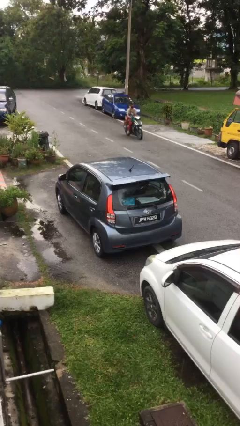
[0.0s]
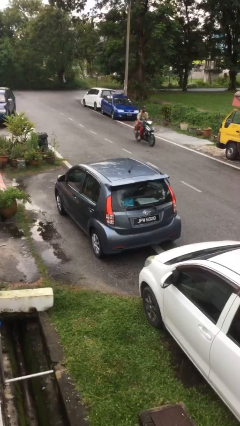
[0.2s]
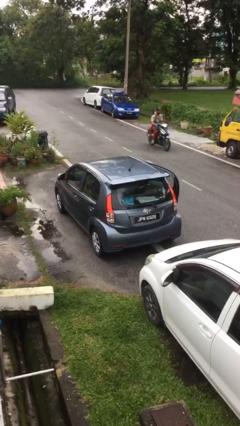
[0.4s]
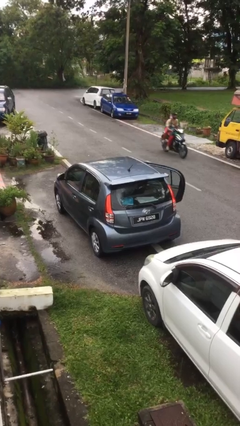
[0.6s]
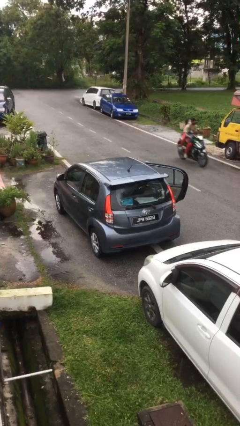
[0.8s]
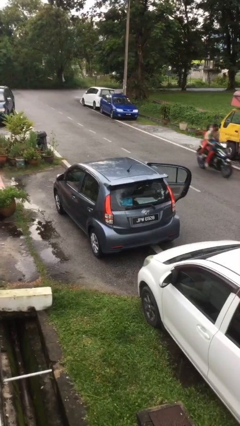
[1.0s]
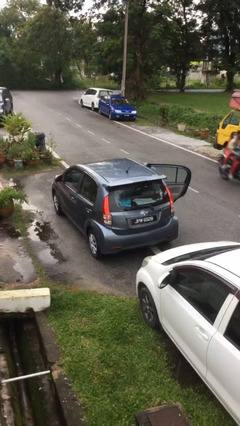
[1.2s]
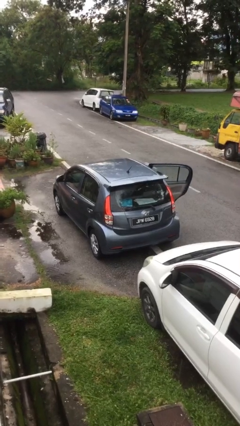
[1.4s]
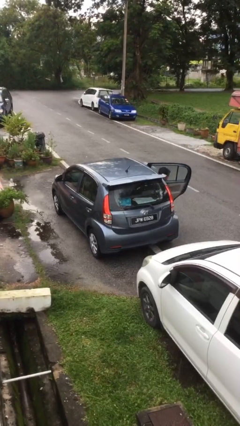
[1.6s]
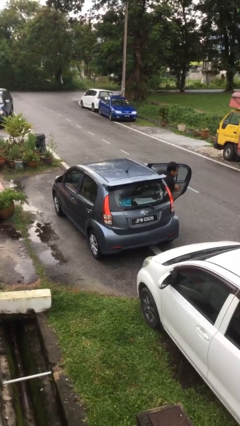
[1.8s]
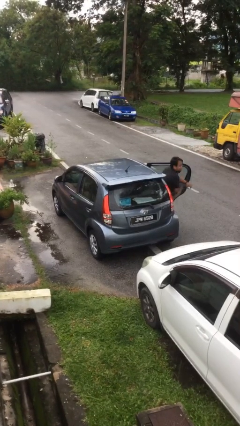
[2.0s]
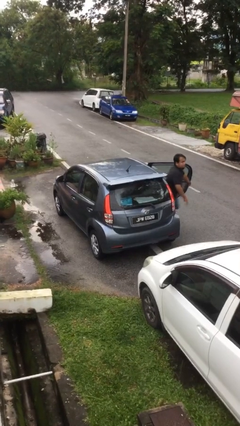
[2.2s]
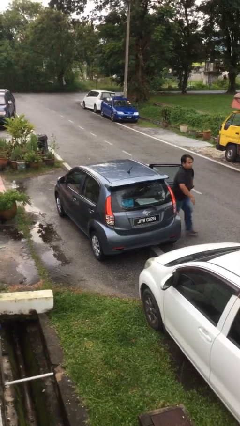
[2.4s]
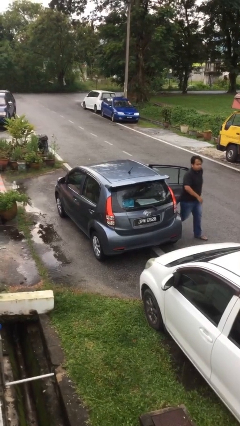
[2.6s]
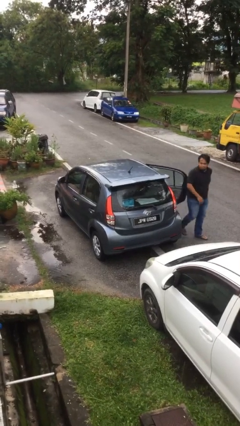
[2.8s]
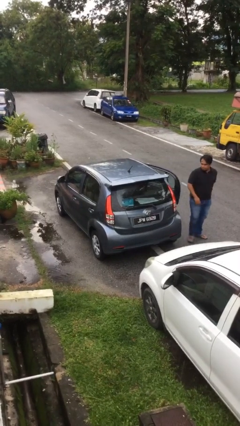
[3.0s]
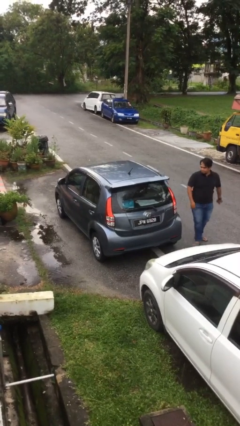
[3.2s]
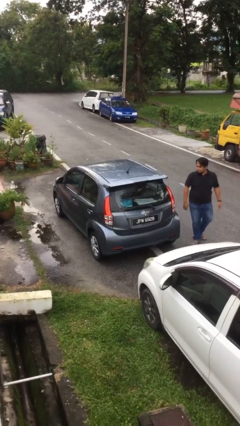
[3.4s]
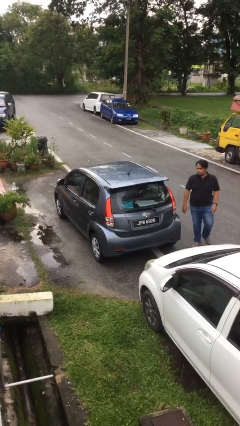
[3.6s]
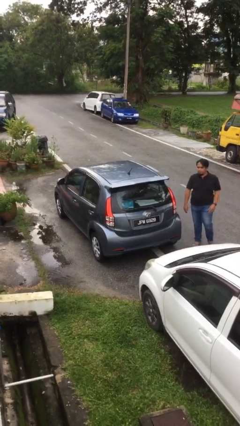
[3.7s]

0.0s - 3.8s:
car drops off person

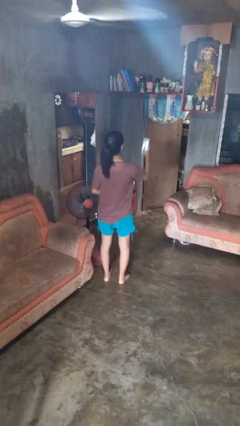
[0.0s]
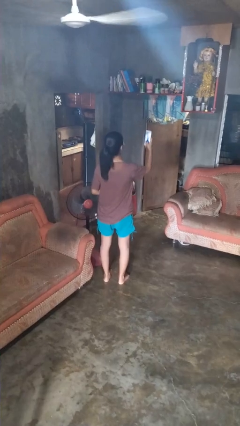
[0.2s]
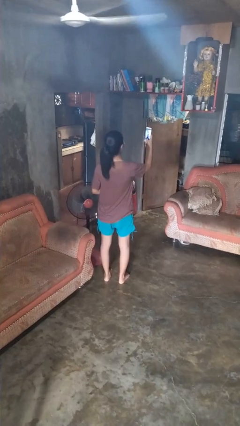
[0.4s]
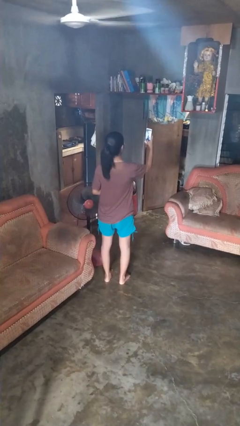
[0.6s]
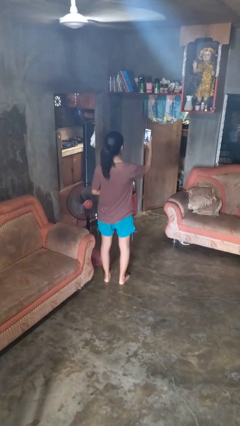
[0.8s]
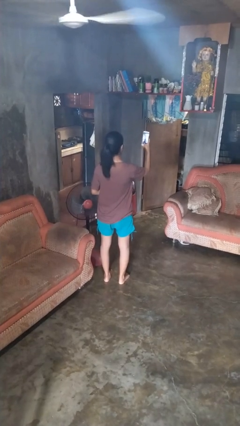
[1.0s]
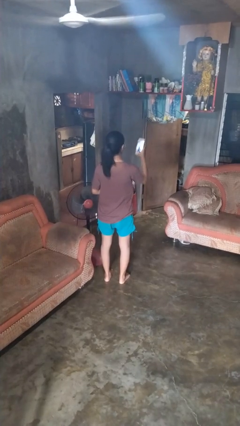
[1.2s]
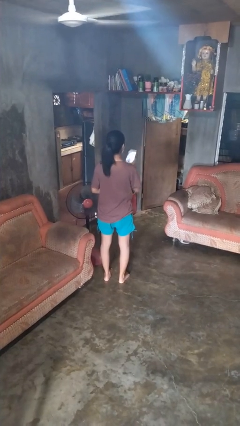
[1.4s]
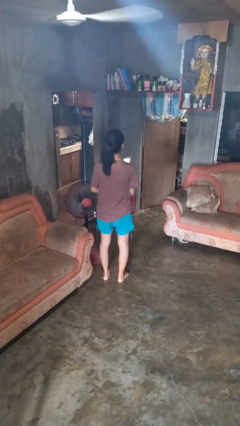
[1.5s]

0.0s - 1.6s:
person takes selfie

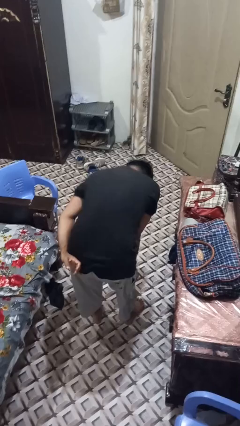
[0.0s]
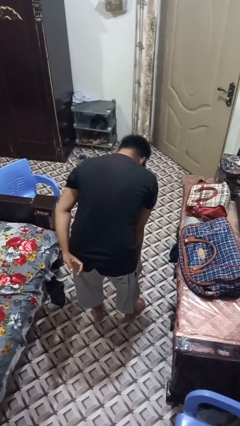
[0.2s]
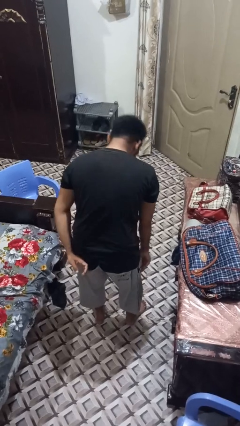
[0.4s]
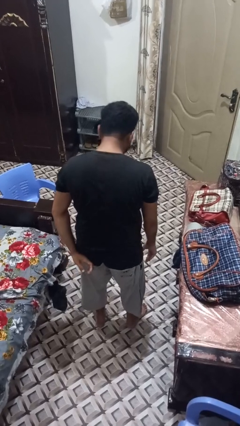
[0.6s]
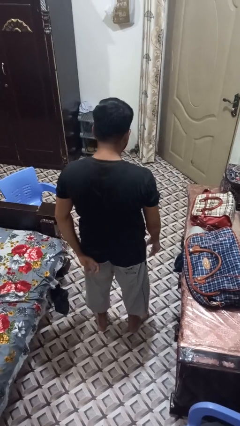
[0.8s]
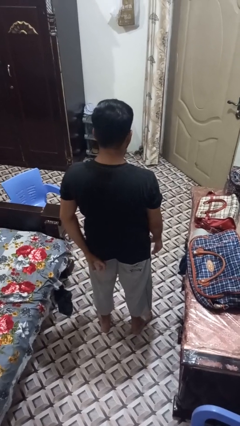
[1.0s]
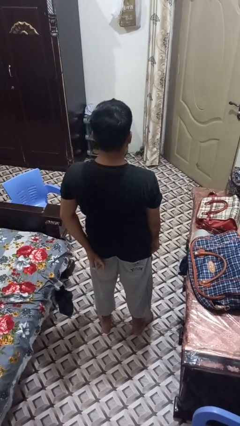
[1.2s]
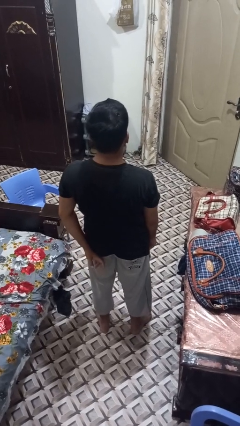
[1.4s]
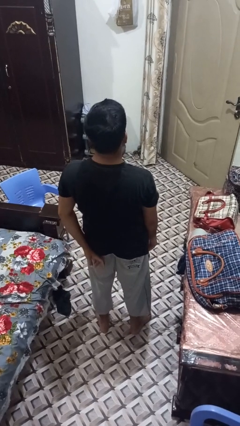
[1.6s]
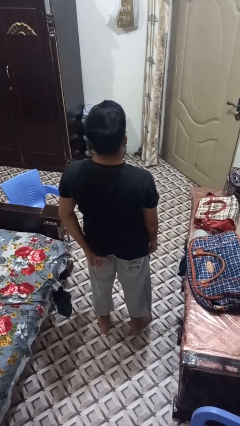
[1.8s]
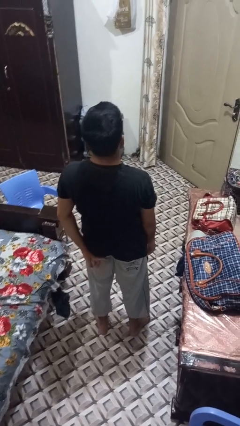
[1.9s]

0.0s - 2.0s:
person stands up from floor

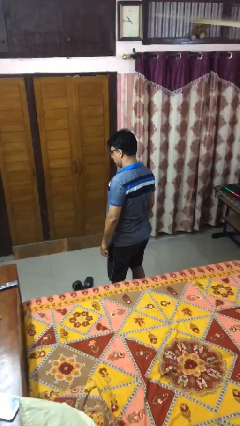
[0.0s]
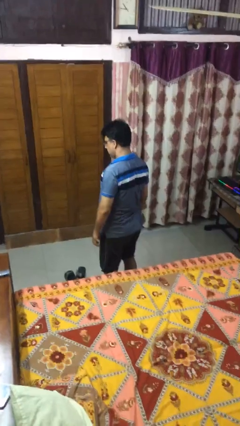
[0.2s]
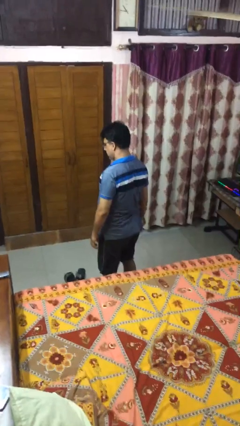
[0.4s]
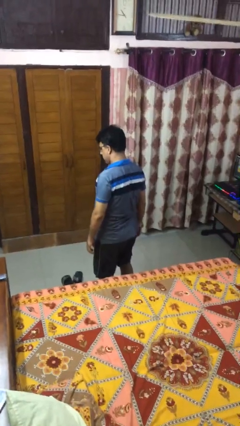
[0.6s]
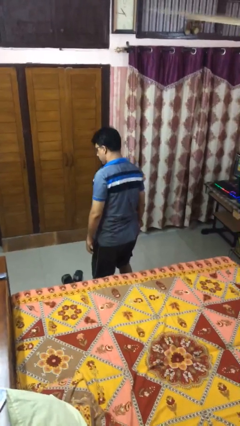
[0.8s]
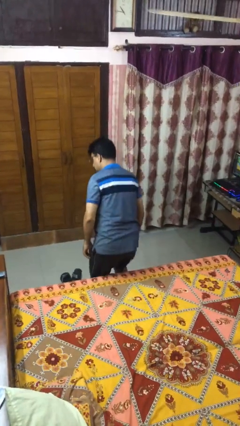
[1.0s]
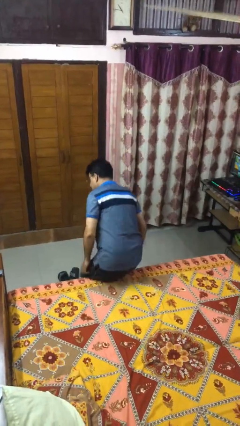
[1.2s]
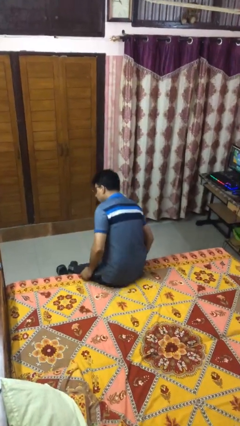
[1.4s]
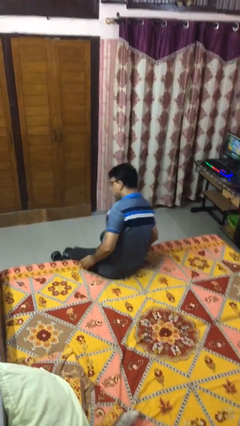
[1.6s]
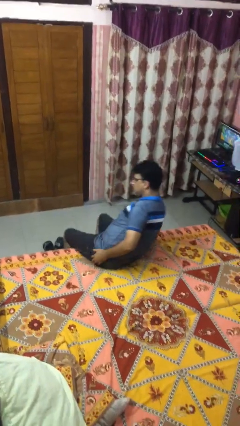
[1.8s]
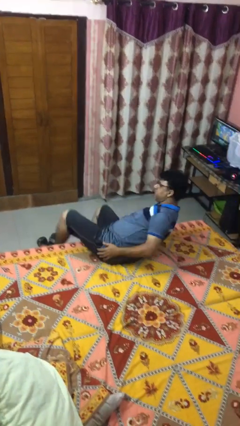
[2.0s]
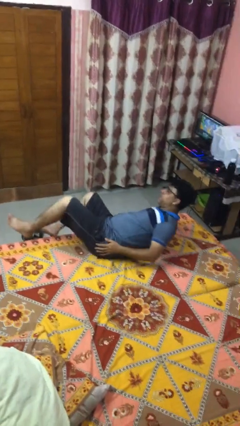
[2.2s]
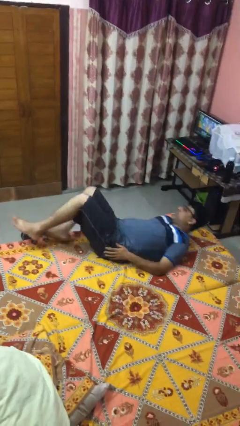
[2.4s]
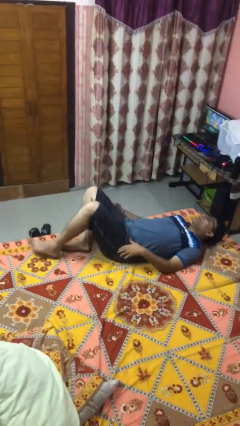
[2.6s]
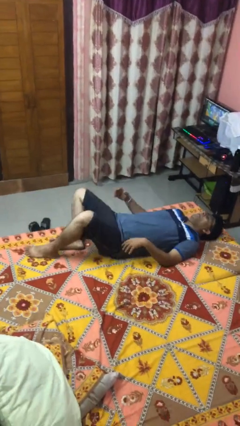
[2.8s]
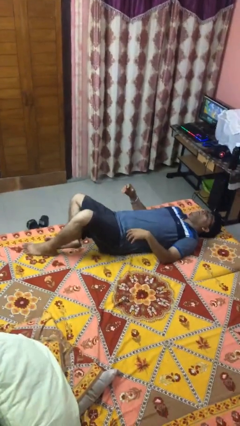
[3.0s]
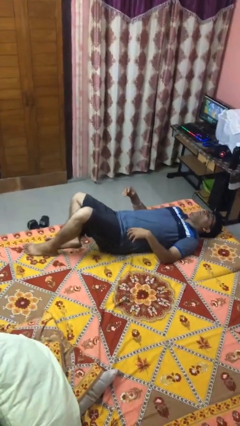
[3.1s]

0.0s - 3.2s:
person lies down on bed

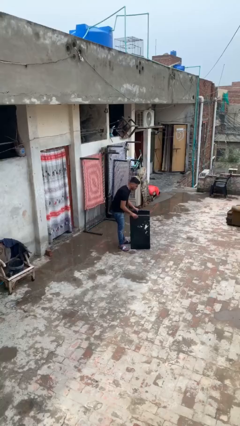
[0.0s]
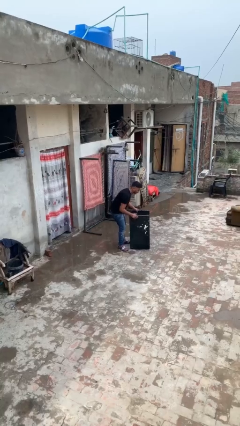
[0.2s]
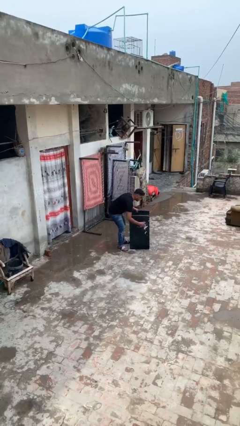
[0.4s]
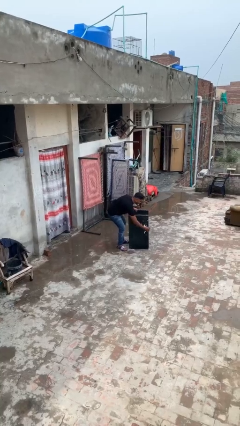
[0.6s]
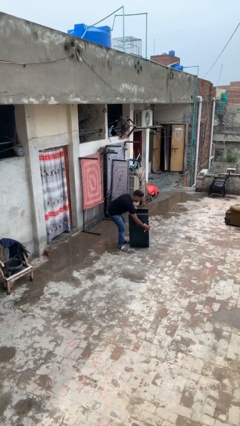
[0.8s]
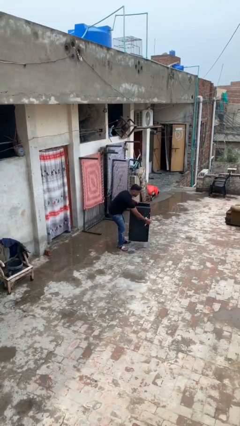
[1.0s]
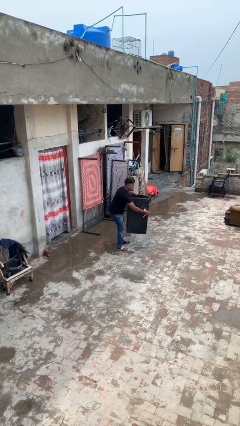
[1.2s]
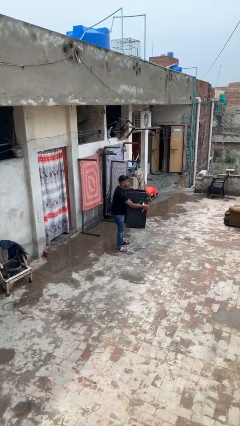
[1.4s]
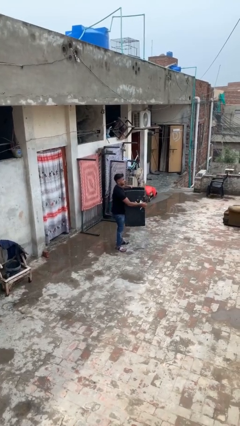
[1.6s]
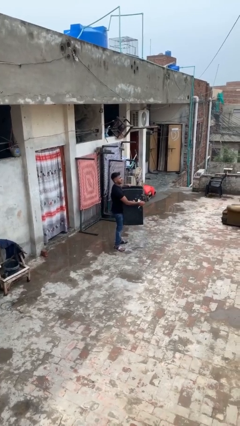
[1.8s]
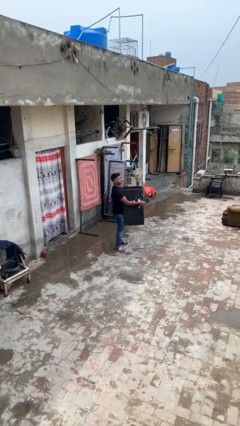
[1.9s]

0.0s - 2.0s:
person picks up object from floor

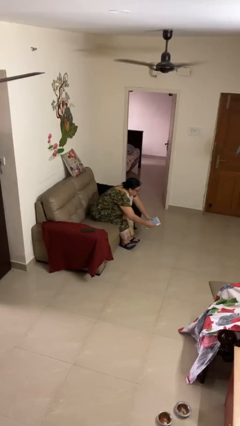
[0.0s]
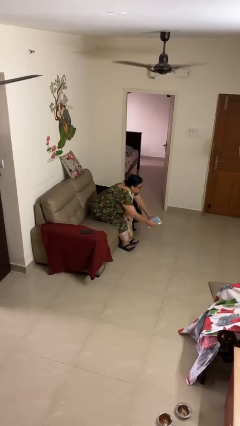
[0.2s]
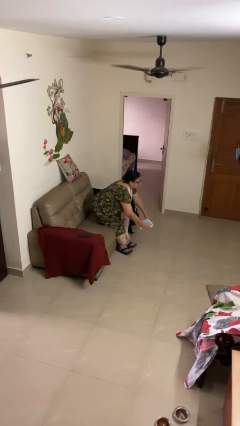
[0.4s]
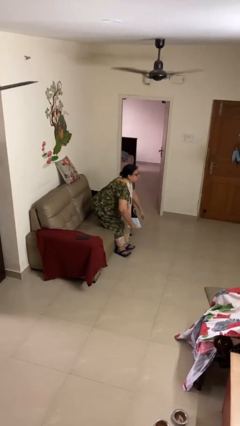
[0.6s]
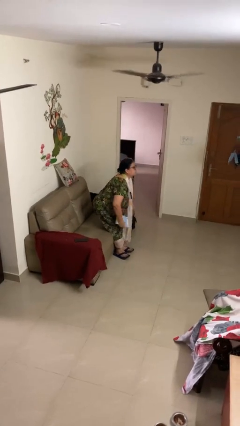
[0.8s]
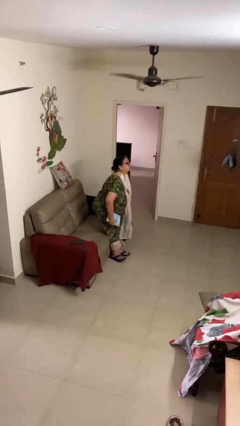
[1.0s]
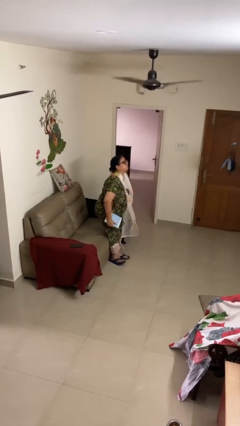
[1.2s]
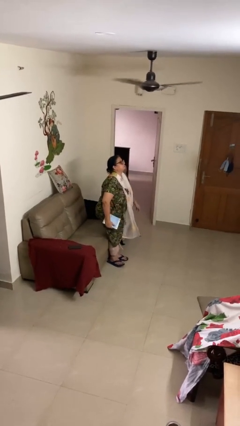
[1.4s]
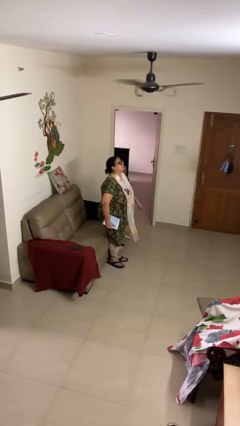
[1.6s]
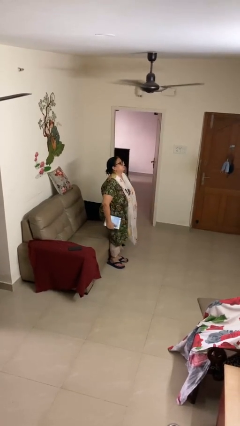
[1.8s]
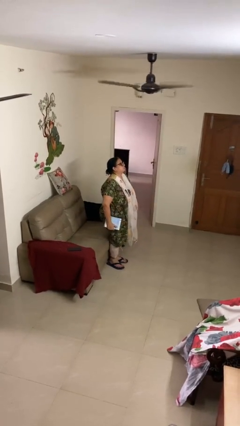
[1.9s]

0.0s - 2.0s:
person stands up

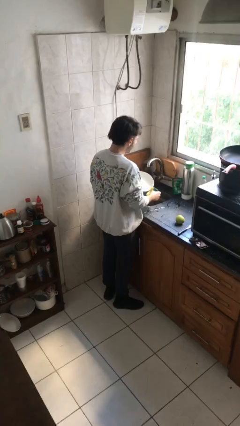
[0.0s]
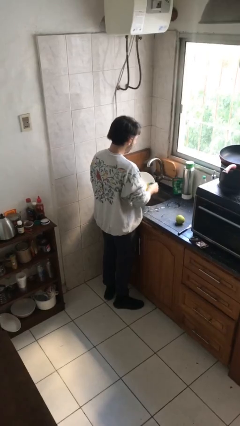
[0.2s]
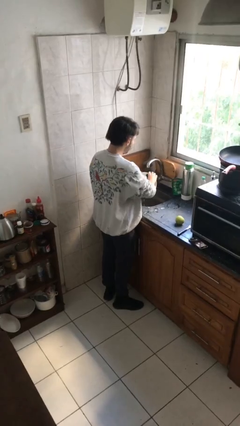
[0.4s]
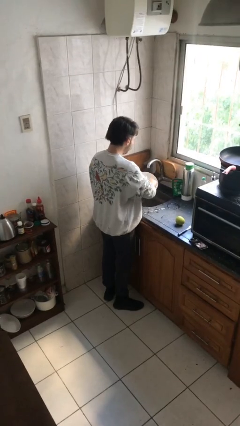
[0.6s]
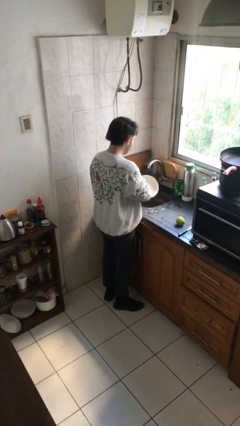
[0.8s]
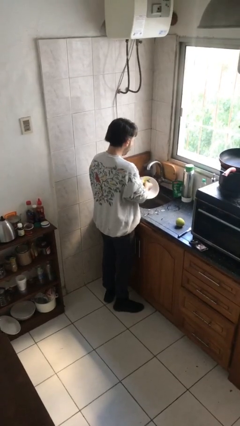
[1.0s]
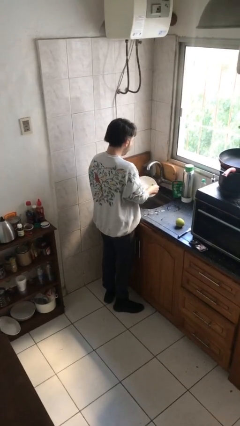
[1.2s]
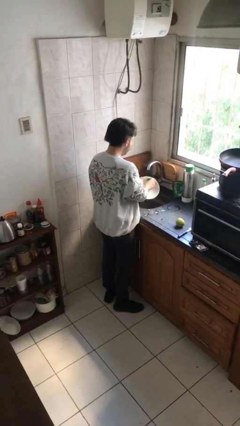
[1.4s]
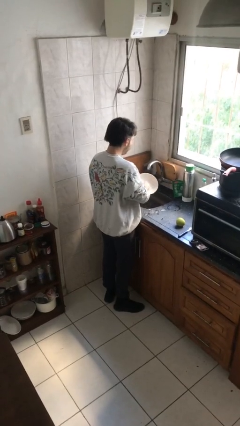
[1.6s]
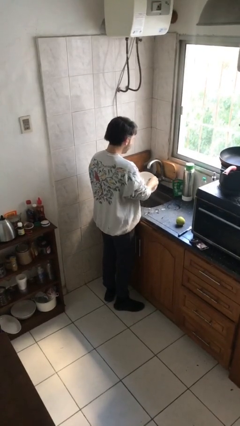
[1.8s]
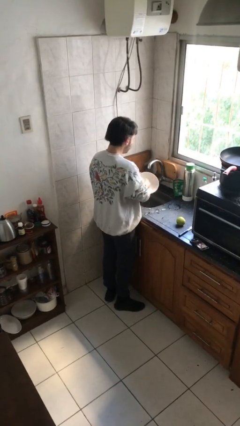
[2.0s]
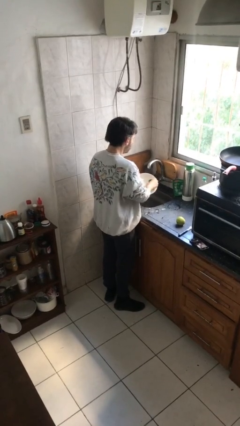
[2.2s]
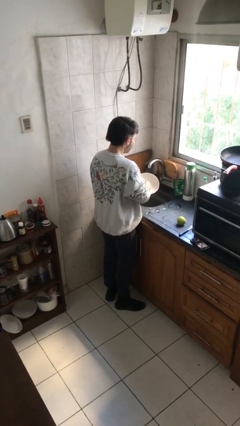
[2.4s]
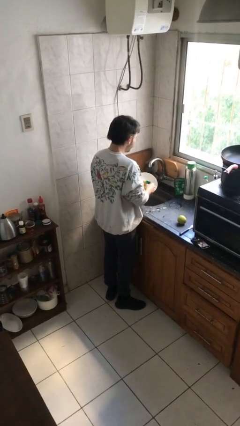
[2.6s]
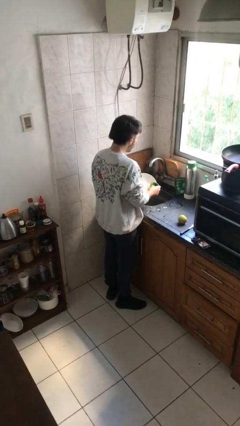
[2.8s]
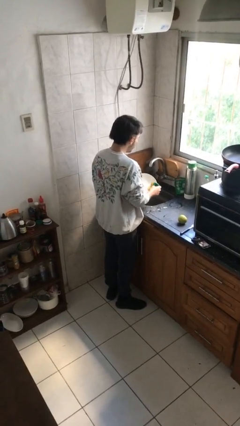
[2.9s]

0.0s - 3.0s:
person washes dish
